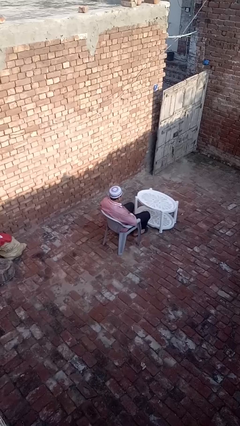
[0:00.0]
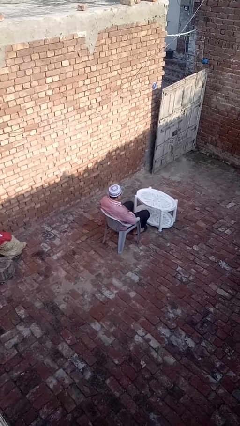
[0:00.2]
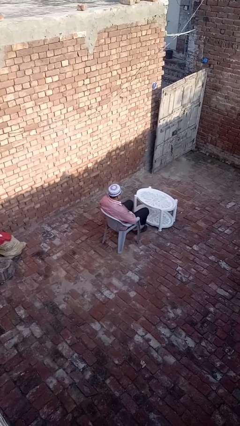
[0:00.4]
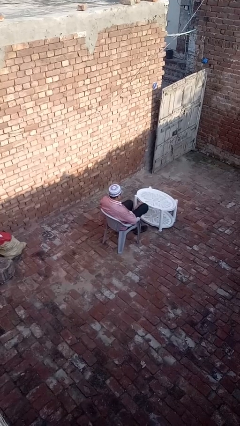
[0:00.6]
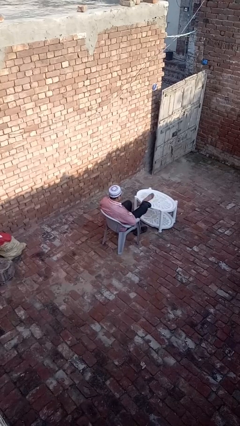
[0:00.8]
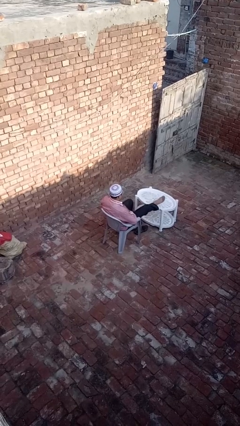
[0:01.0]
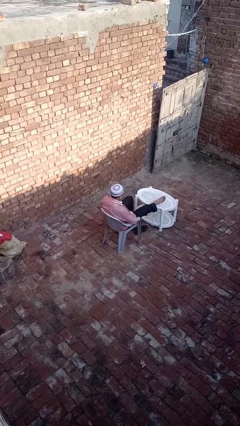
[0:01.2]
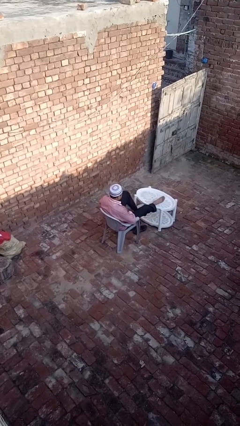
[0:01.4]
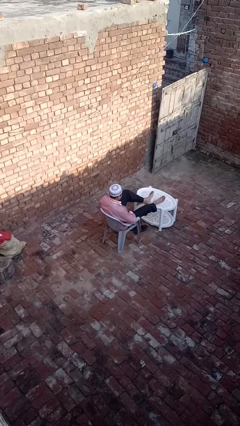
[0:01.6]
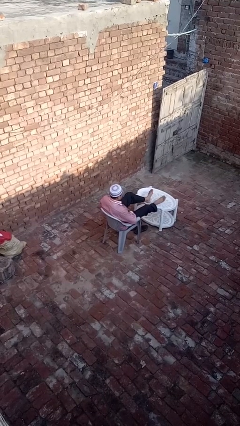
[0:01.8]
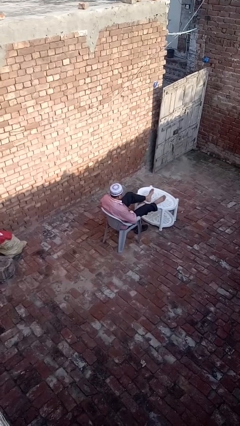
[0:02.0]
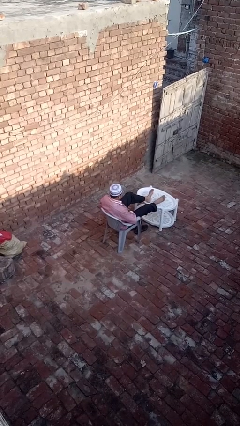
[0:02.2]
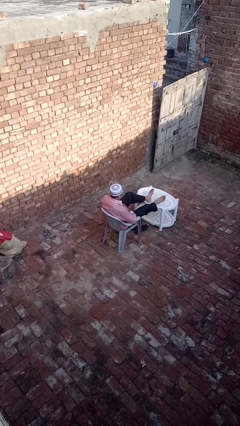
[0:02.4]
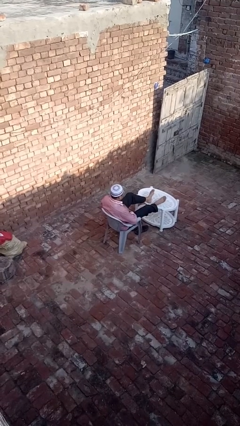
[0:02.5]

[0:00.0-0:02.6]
person puts feet up

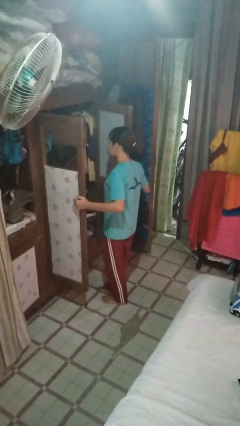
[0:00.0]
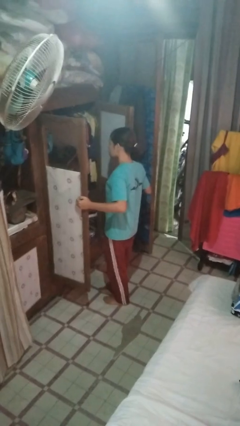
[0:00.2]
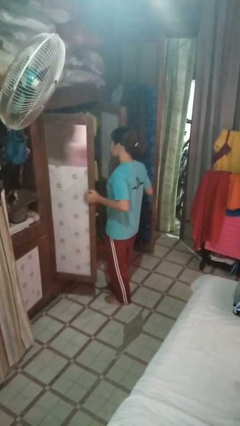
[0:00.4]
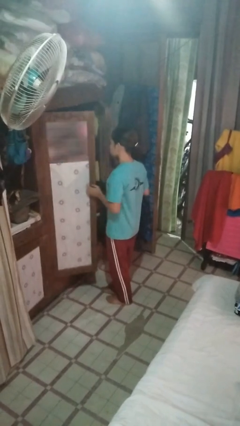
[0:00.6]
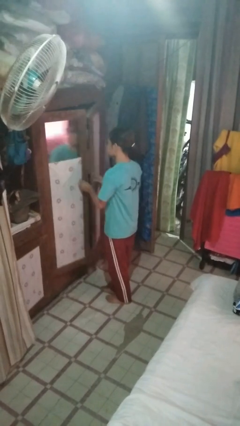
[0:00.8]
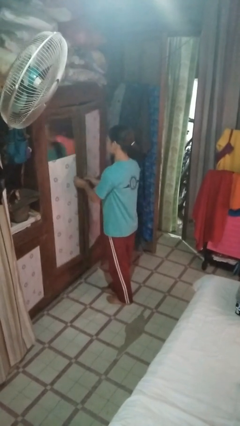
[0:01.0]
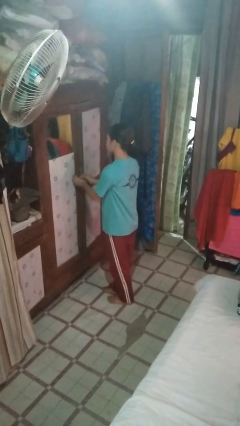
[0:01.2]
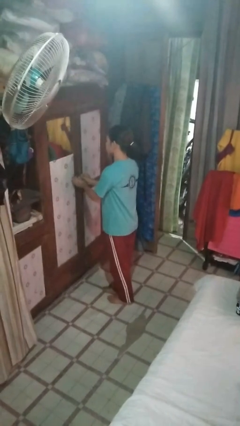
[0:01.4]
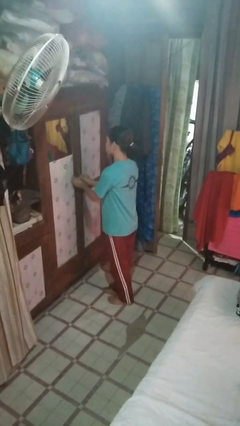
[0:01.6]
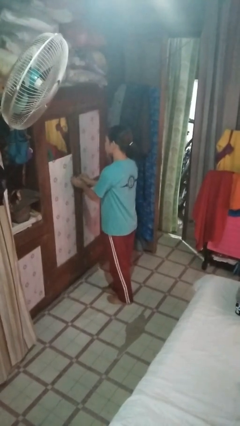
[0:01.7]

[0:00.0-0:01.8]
person closes closet door

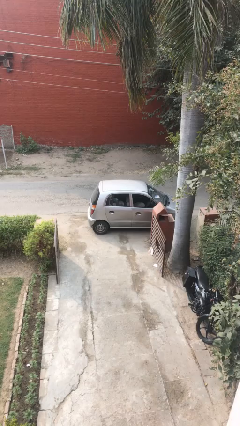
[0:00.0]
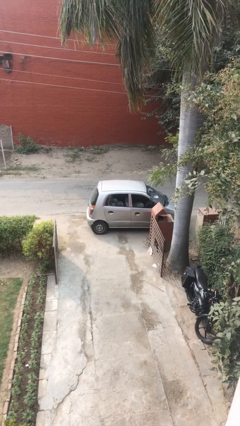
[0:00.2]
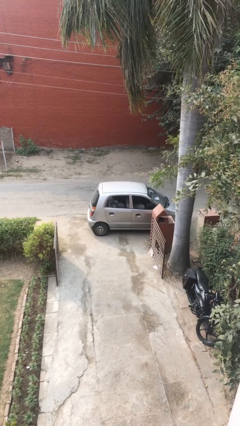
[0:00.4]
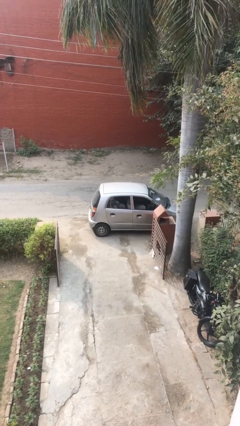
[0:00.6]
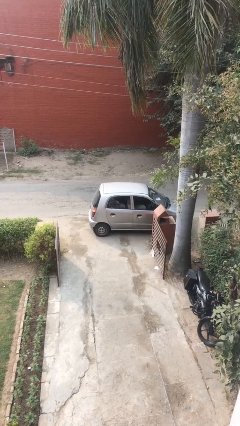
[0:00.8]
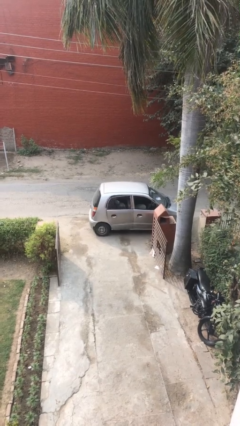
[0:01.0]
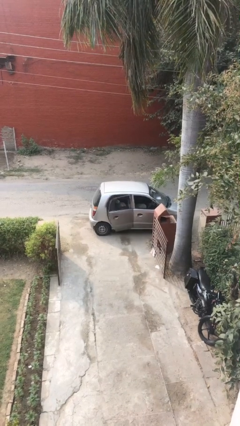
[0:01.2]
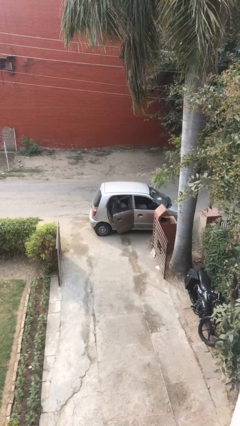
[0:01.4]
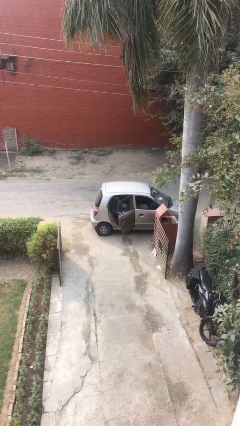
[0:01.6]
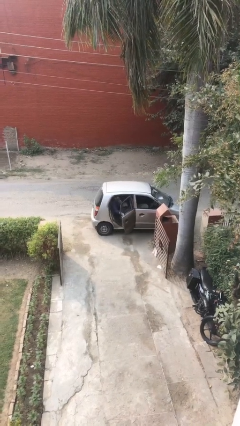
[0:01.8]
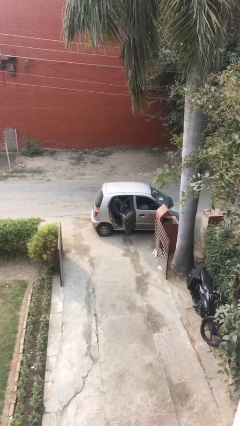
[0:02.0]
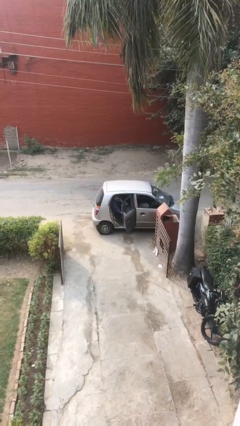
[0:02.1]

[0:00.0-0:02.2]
person opens car door

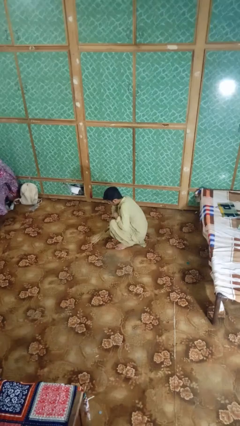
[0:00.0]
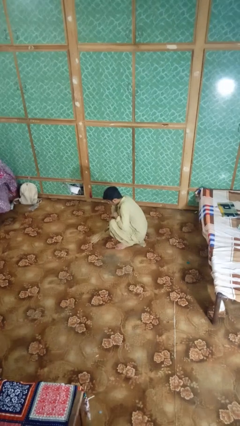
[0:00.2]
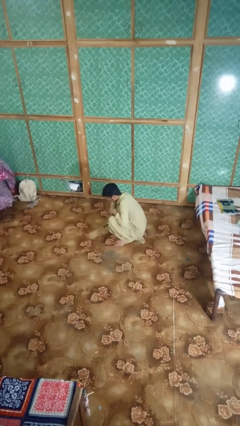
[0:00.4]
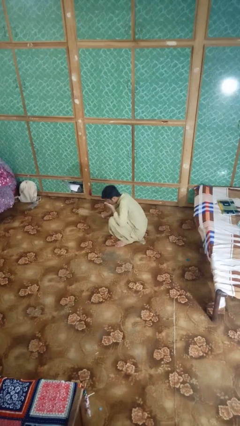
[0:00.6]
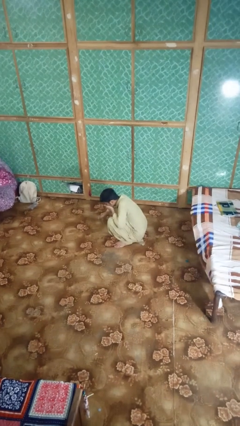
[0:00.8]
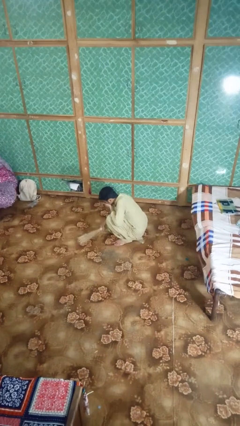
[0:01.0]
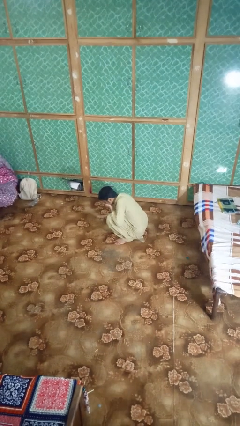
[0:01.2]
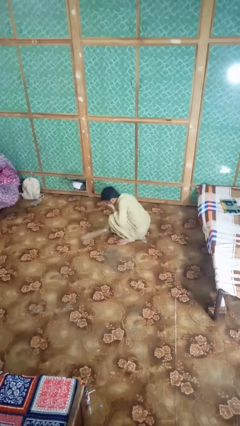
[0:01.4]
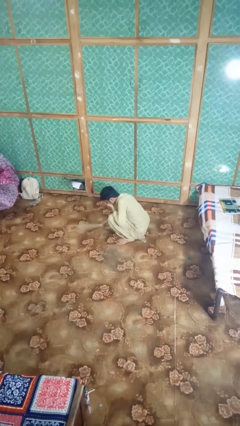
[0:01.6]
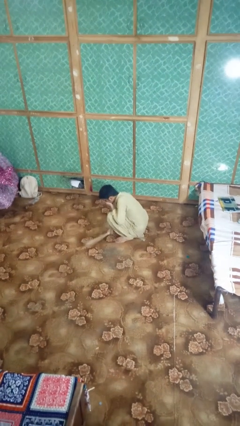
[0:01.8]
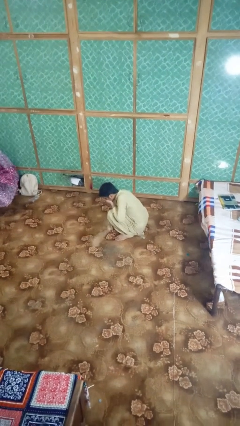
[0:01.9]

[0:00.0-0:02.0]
person yawns

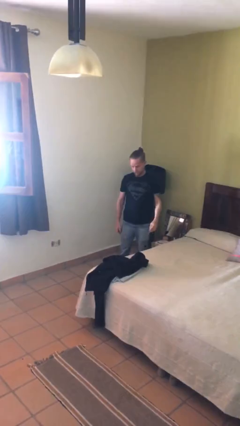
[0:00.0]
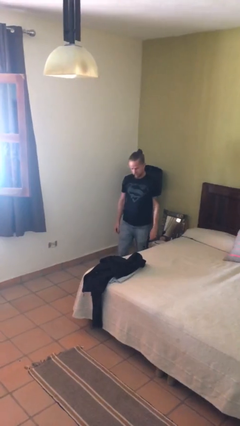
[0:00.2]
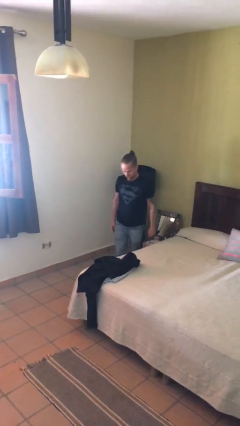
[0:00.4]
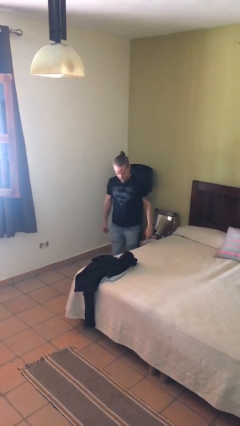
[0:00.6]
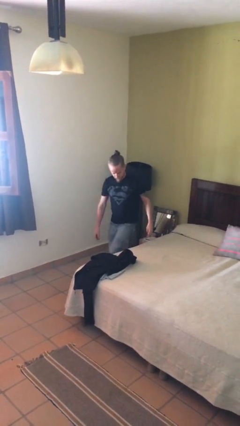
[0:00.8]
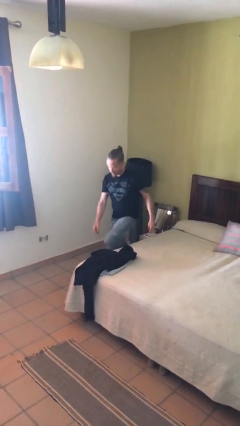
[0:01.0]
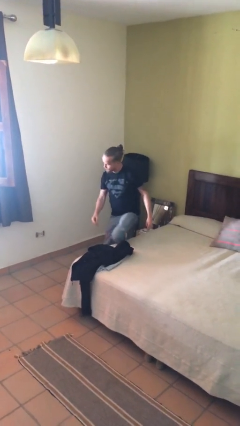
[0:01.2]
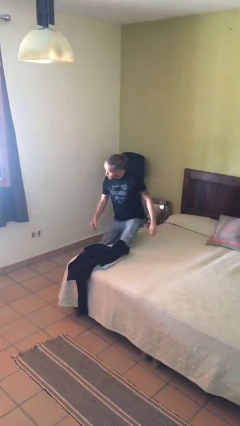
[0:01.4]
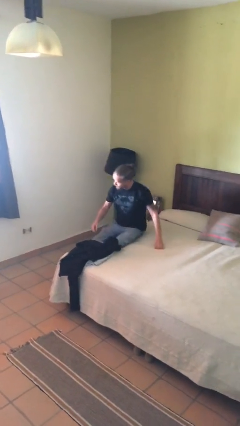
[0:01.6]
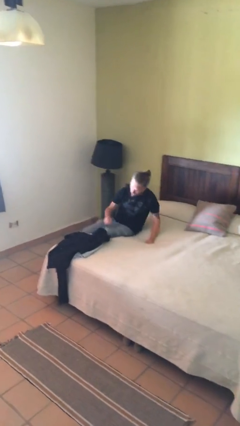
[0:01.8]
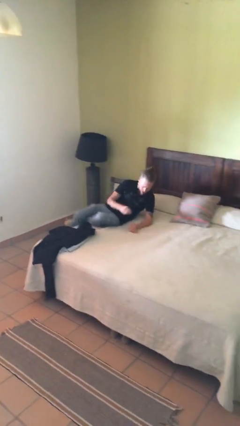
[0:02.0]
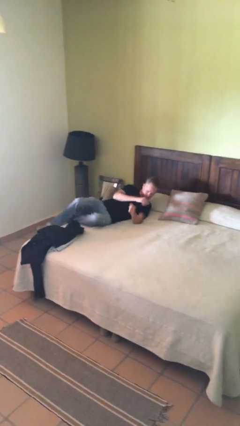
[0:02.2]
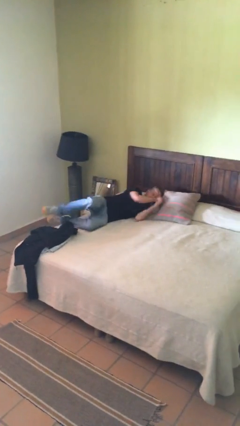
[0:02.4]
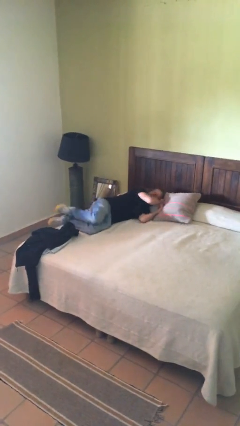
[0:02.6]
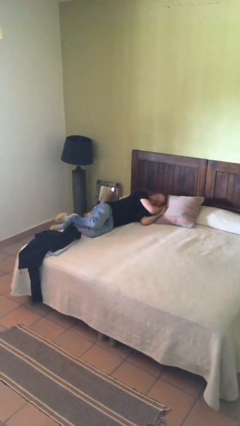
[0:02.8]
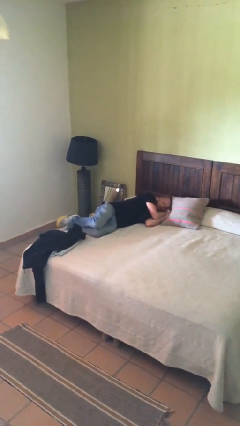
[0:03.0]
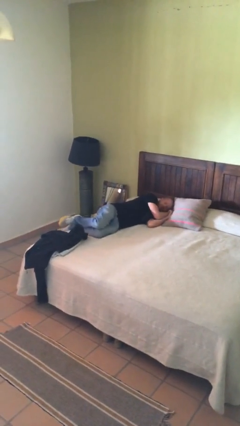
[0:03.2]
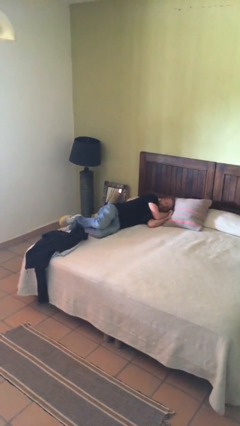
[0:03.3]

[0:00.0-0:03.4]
person lies down on bed

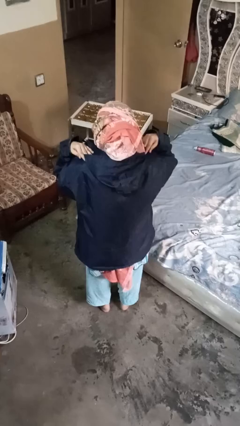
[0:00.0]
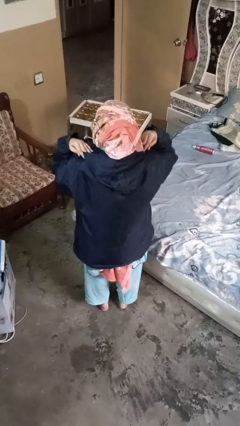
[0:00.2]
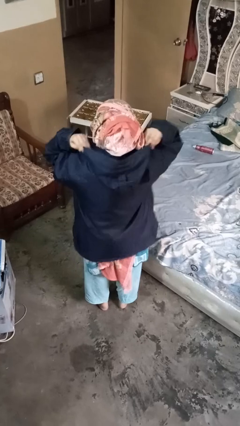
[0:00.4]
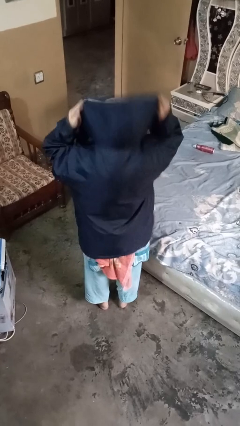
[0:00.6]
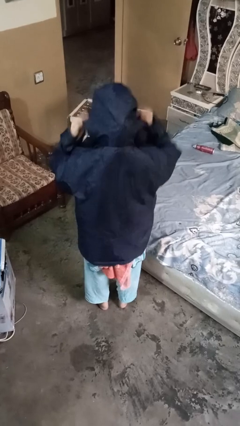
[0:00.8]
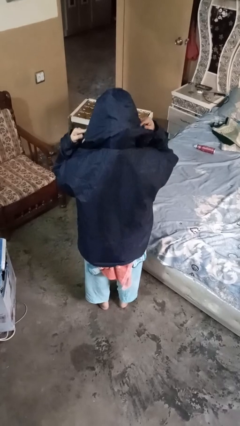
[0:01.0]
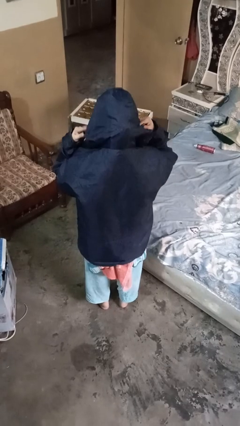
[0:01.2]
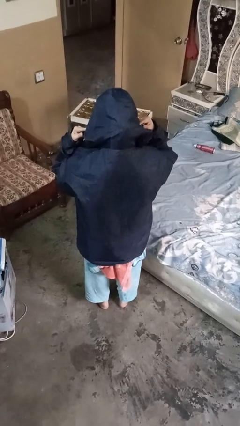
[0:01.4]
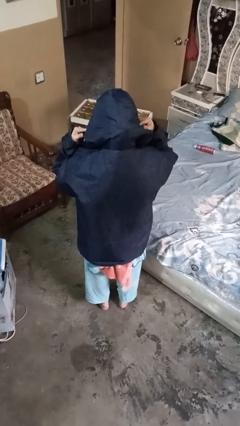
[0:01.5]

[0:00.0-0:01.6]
person puts on hoodie

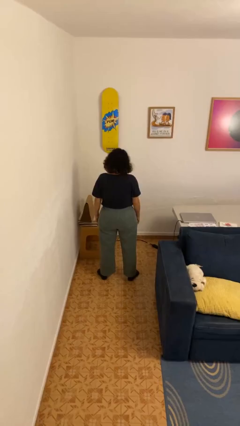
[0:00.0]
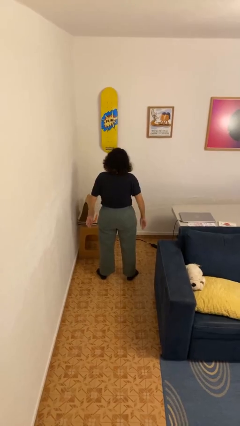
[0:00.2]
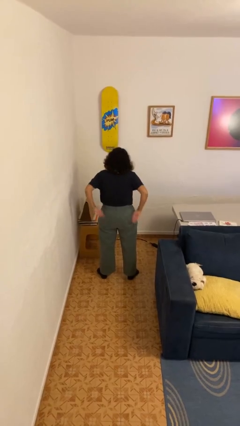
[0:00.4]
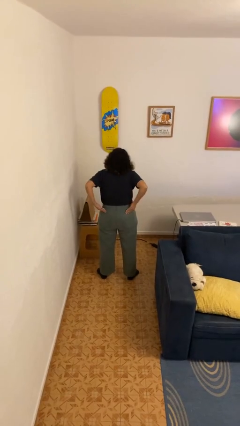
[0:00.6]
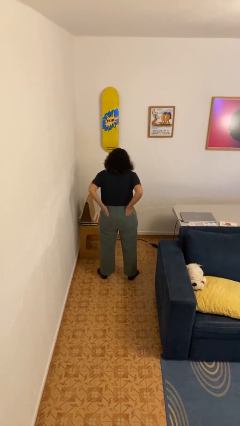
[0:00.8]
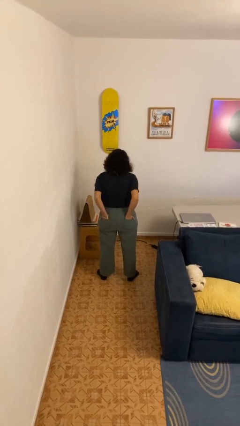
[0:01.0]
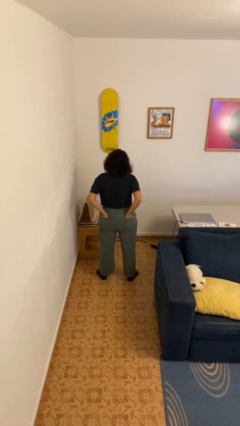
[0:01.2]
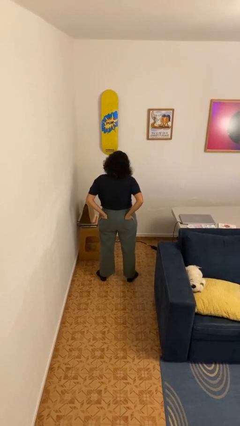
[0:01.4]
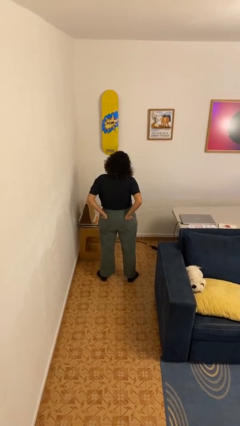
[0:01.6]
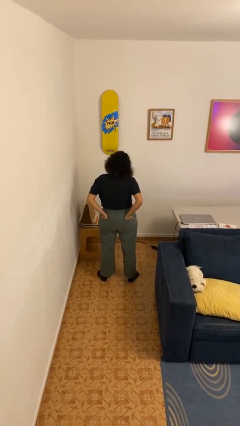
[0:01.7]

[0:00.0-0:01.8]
person puts hands in back pockets

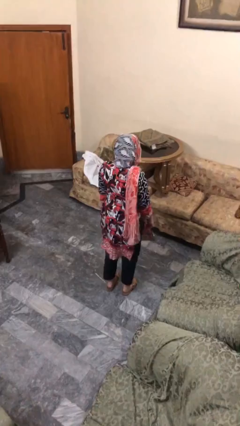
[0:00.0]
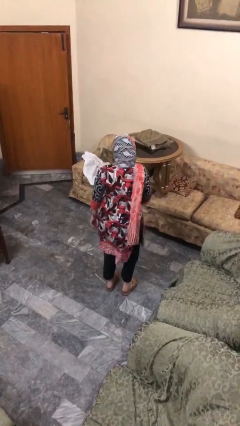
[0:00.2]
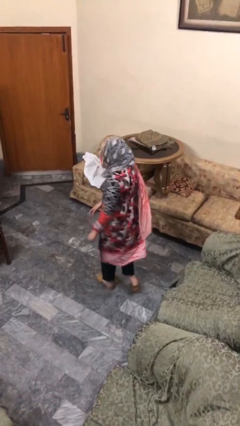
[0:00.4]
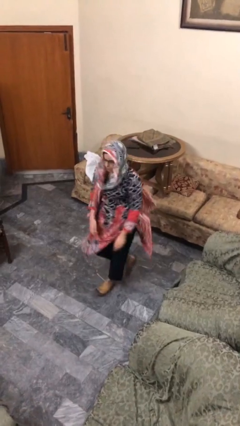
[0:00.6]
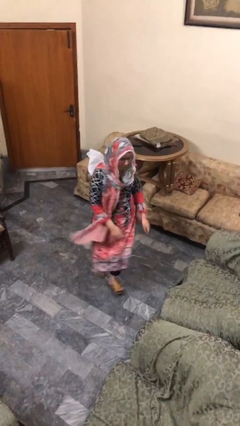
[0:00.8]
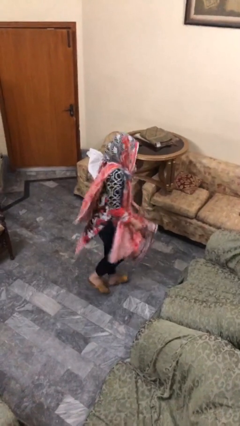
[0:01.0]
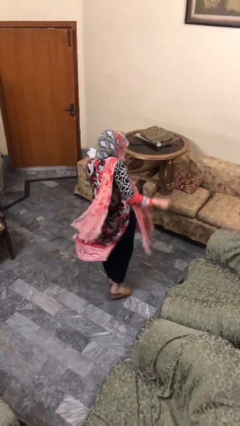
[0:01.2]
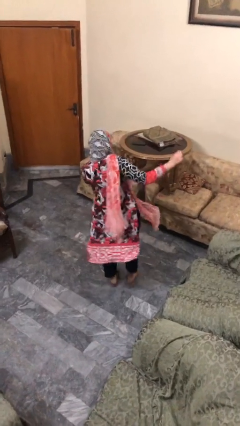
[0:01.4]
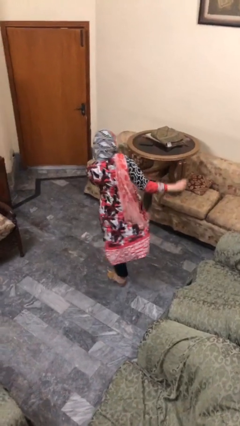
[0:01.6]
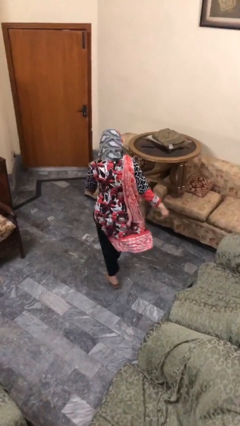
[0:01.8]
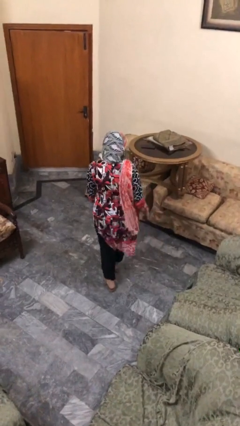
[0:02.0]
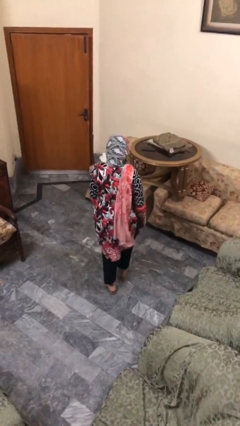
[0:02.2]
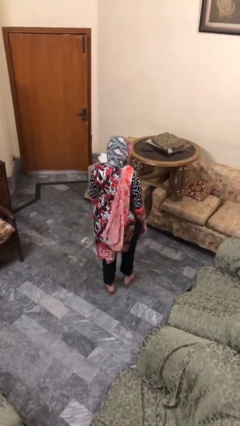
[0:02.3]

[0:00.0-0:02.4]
person twirls
